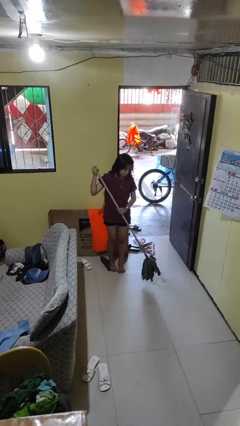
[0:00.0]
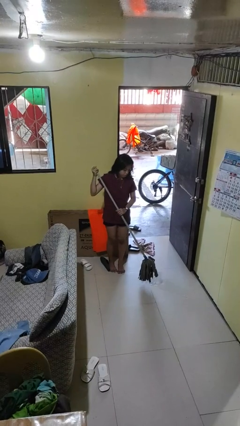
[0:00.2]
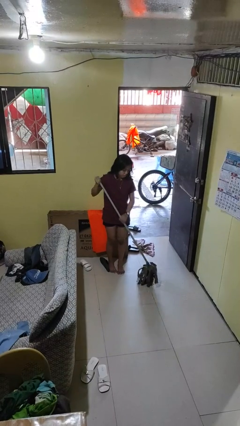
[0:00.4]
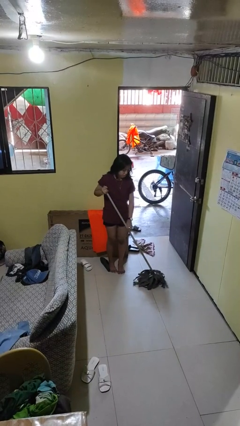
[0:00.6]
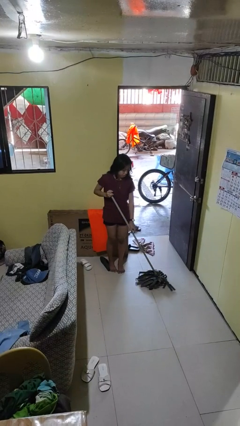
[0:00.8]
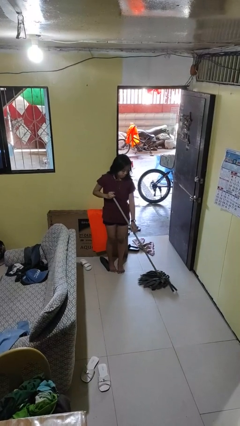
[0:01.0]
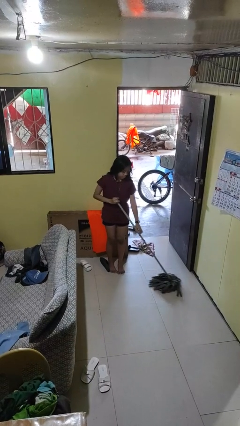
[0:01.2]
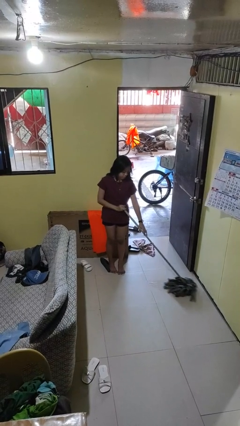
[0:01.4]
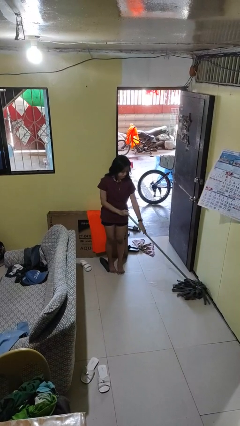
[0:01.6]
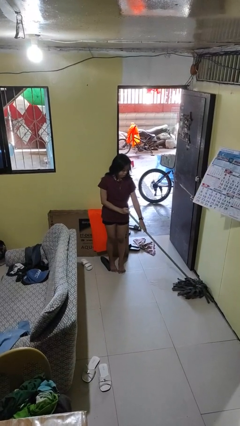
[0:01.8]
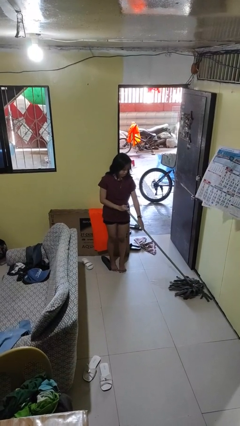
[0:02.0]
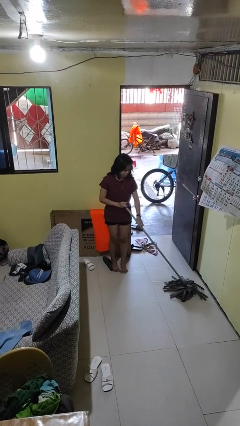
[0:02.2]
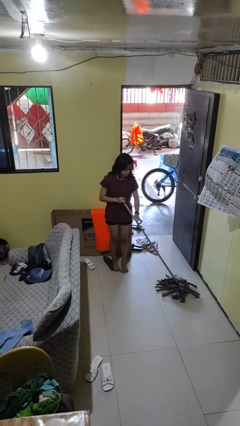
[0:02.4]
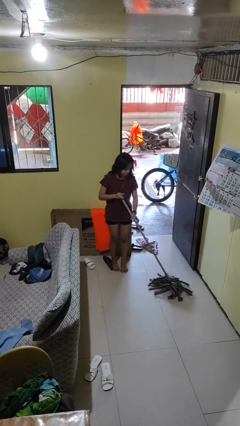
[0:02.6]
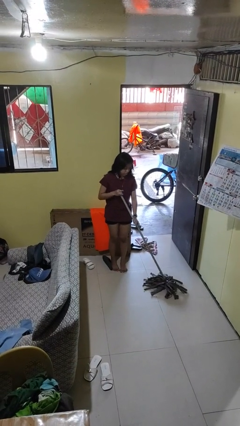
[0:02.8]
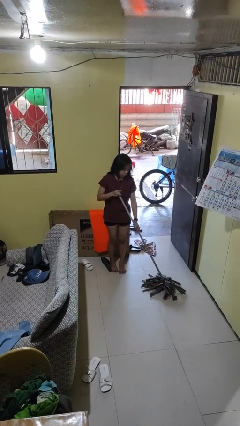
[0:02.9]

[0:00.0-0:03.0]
person mops

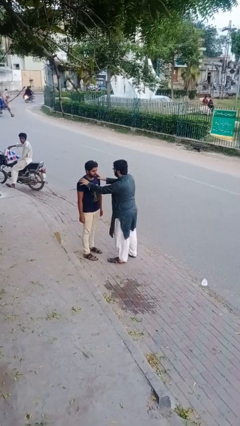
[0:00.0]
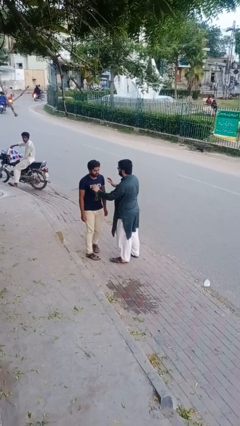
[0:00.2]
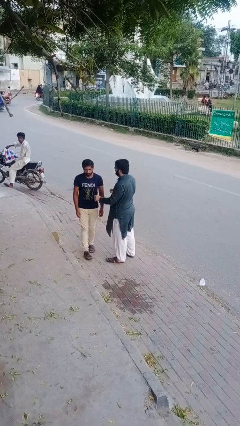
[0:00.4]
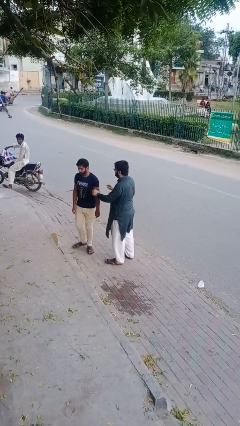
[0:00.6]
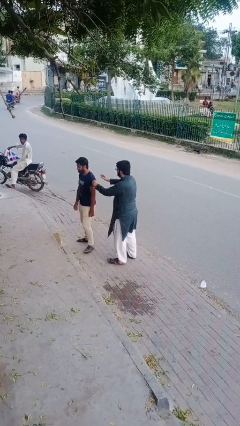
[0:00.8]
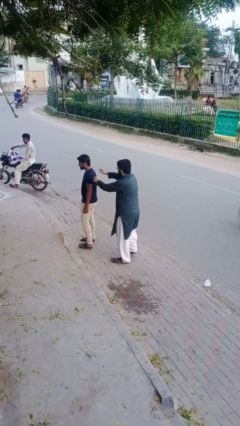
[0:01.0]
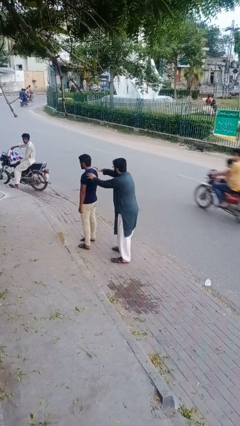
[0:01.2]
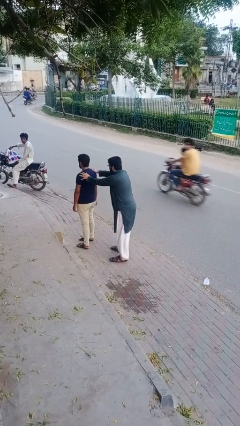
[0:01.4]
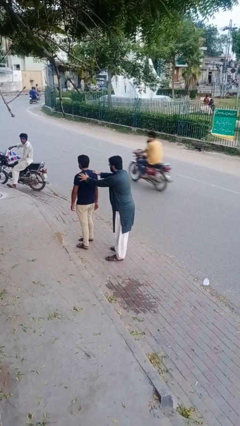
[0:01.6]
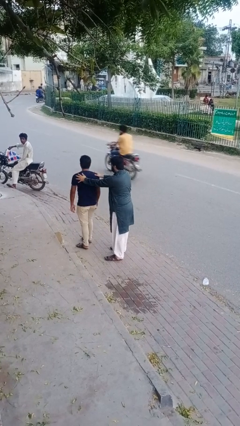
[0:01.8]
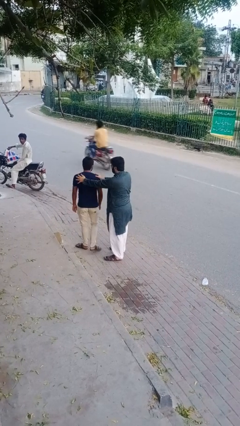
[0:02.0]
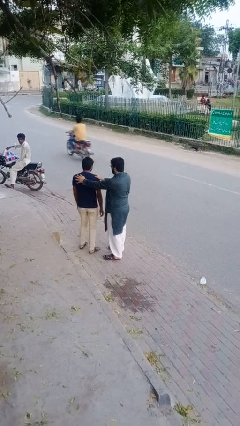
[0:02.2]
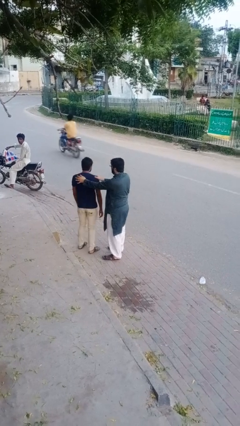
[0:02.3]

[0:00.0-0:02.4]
person grabs person by shoulder

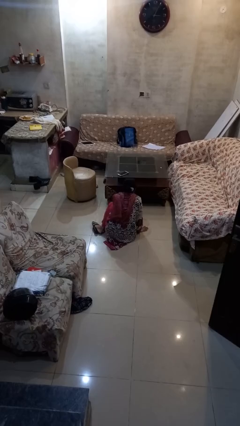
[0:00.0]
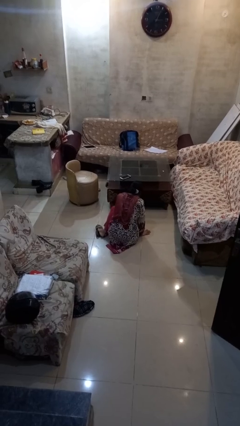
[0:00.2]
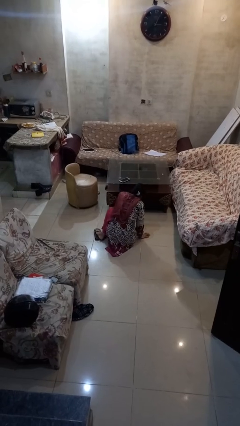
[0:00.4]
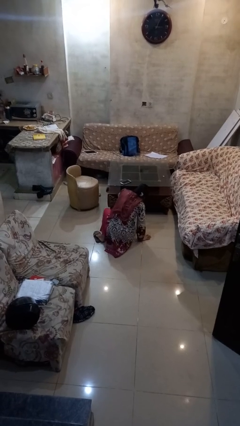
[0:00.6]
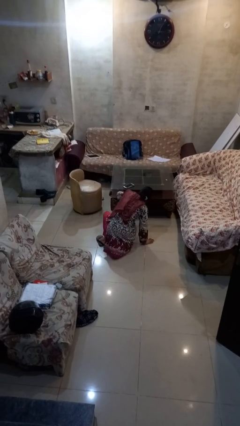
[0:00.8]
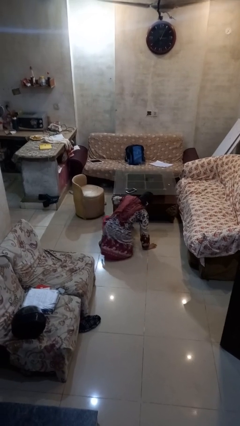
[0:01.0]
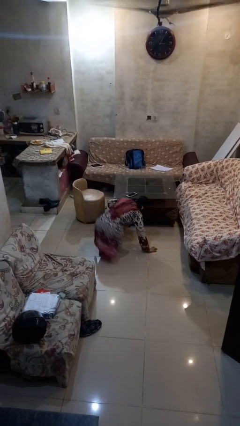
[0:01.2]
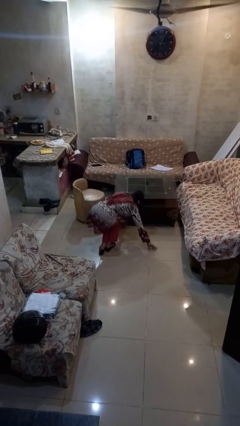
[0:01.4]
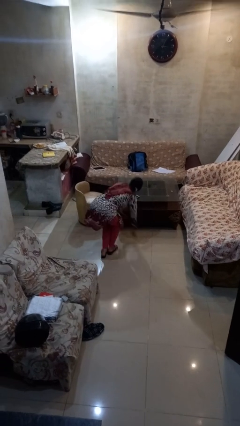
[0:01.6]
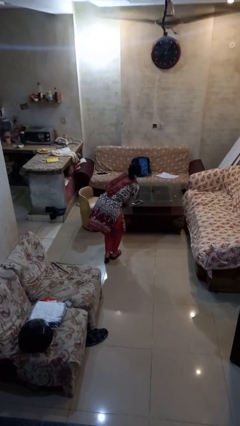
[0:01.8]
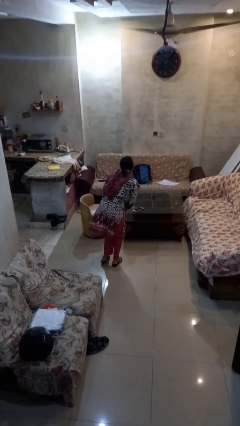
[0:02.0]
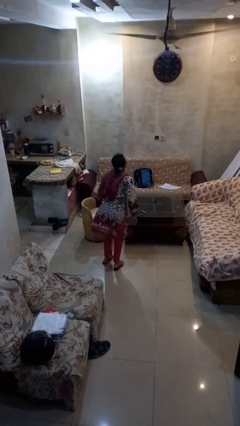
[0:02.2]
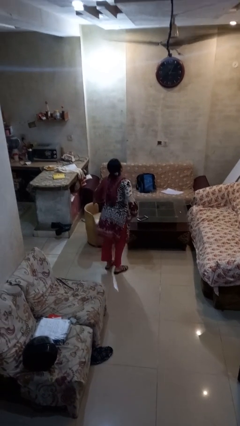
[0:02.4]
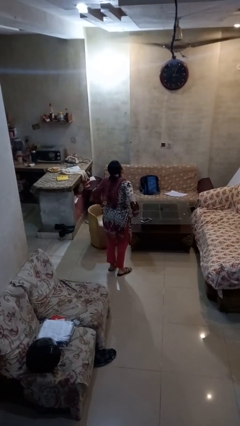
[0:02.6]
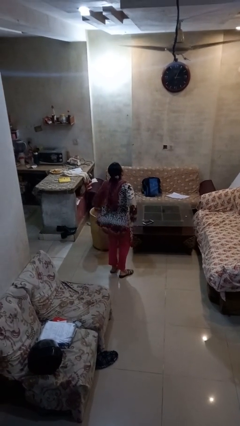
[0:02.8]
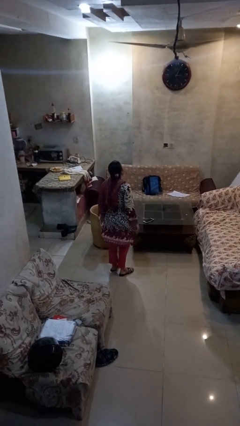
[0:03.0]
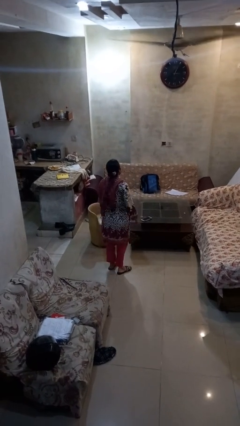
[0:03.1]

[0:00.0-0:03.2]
person stands up from floor

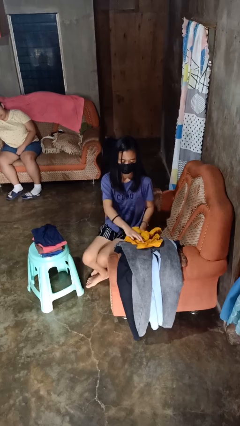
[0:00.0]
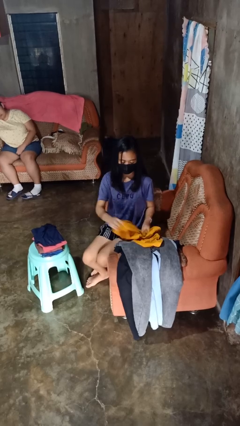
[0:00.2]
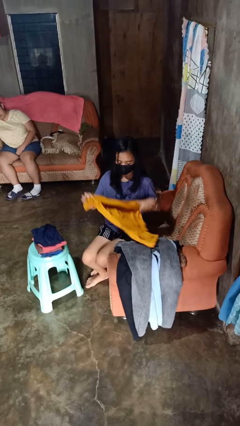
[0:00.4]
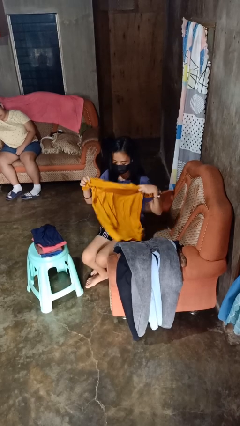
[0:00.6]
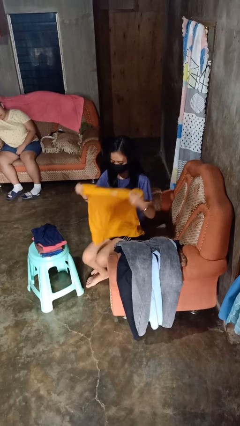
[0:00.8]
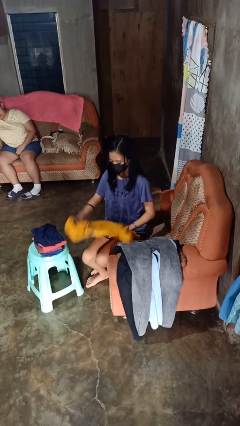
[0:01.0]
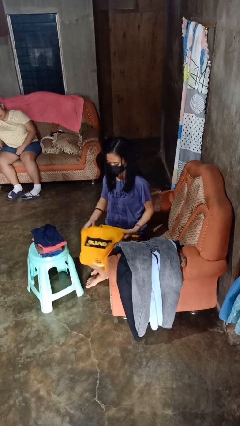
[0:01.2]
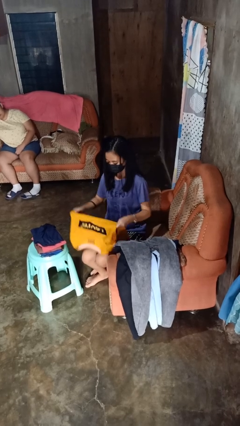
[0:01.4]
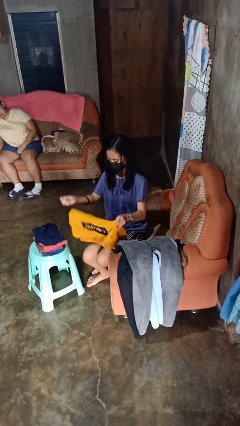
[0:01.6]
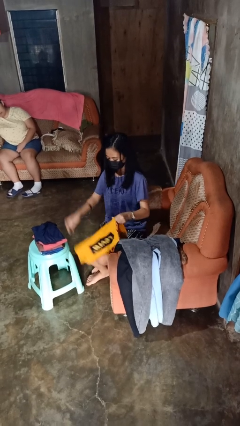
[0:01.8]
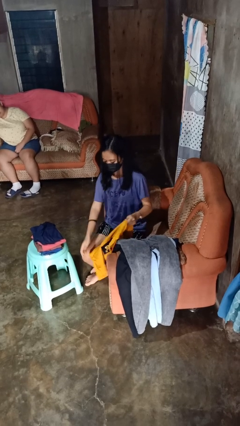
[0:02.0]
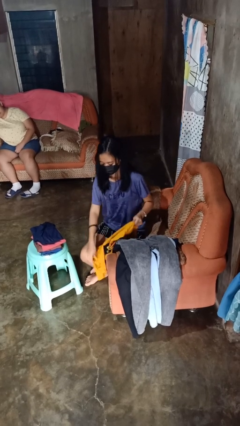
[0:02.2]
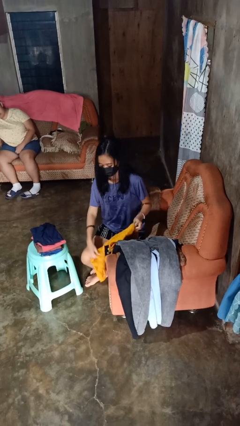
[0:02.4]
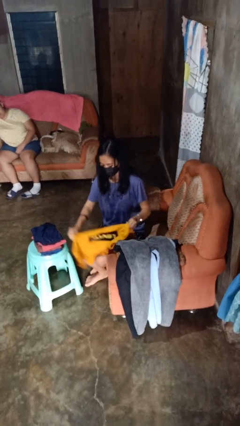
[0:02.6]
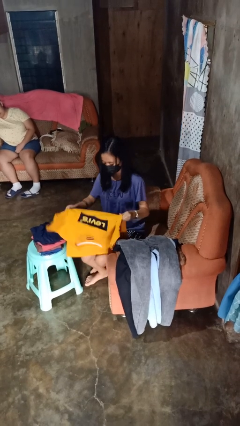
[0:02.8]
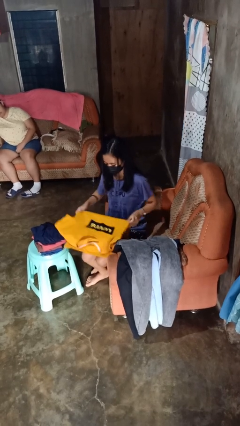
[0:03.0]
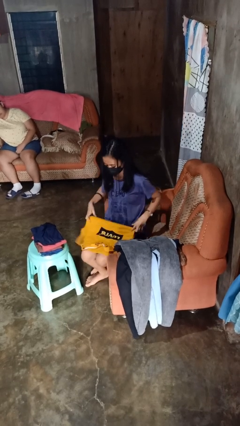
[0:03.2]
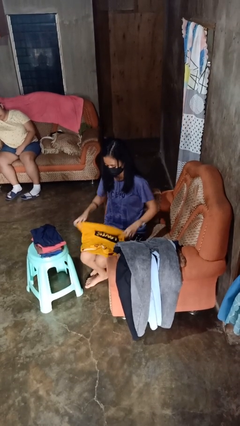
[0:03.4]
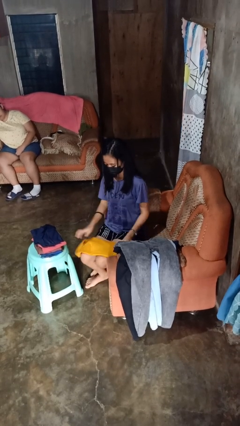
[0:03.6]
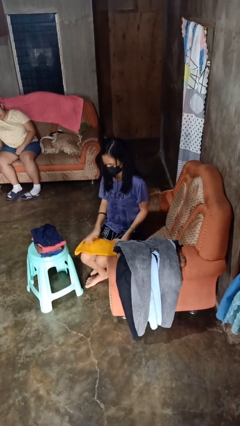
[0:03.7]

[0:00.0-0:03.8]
person folds shirt

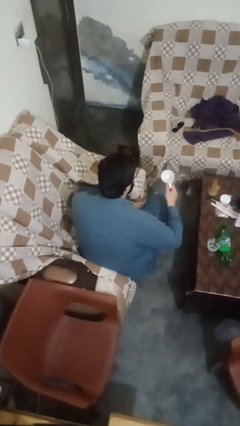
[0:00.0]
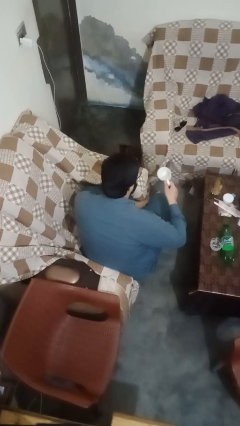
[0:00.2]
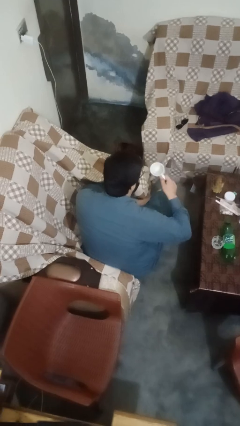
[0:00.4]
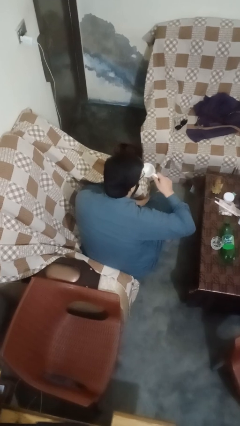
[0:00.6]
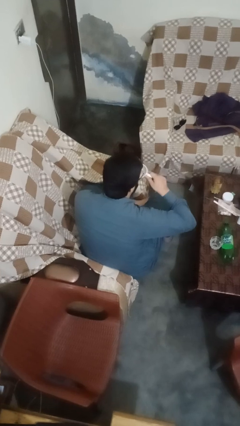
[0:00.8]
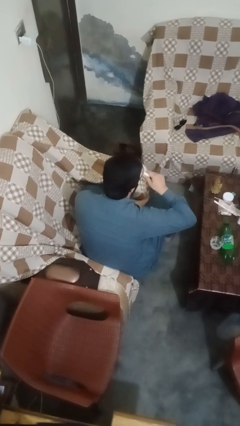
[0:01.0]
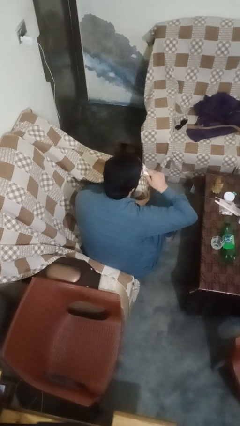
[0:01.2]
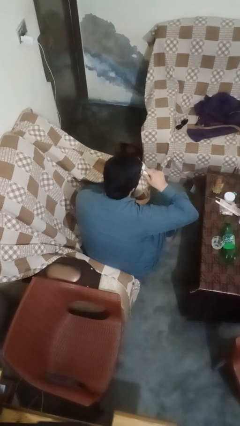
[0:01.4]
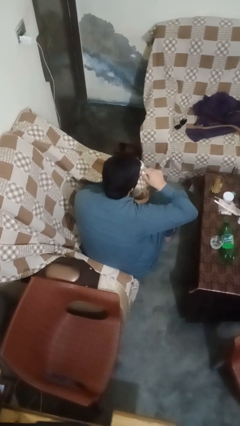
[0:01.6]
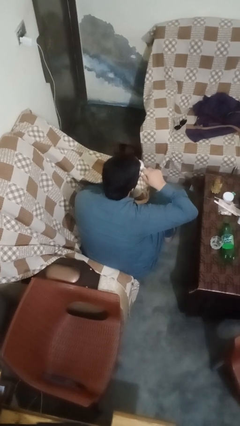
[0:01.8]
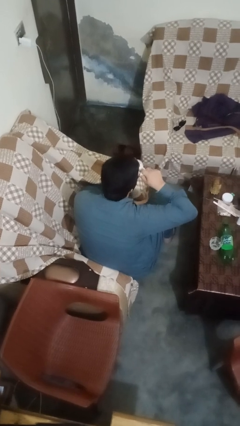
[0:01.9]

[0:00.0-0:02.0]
person drinks from mug

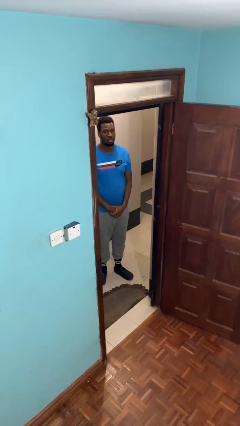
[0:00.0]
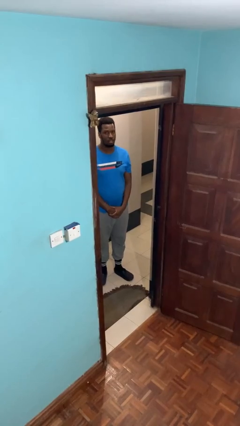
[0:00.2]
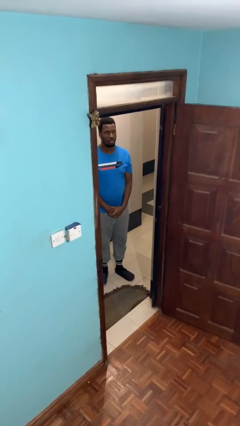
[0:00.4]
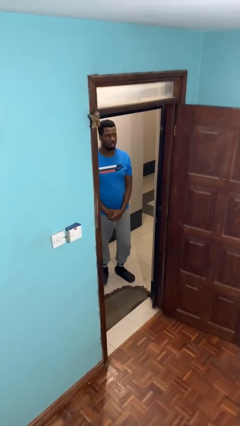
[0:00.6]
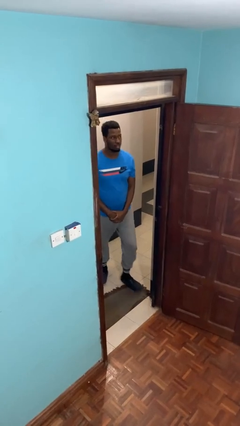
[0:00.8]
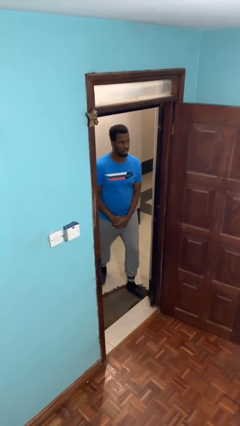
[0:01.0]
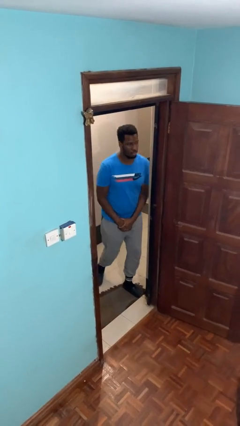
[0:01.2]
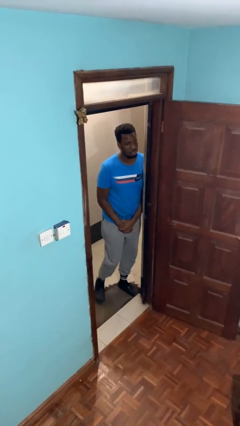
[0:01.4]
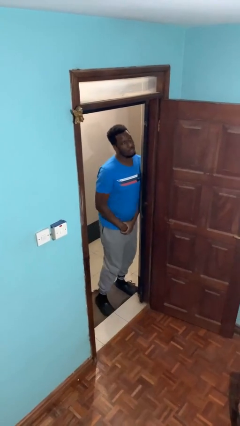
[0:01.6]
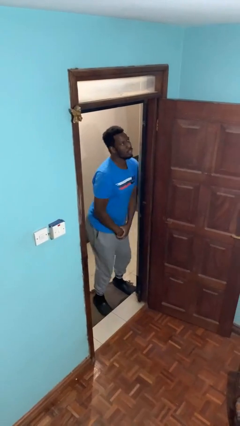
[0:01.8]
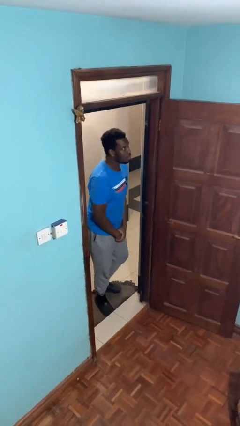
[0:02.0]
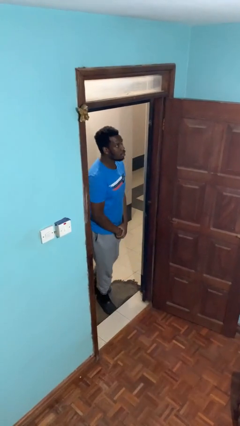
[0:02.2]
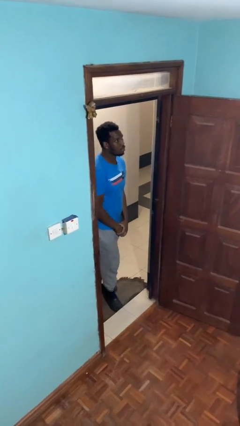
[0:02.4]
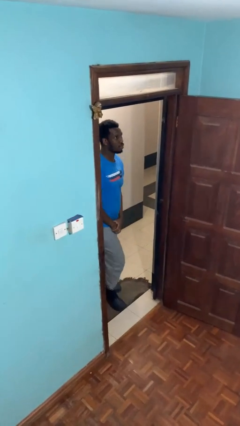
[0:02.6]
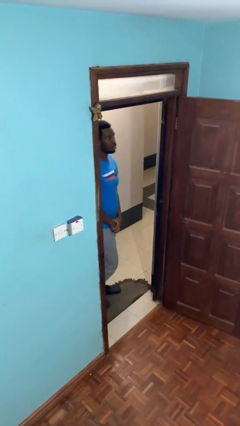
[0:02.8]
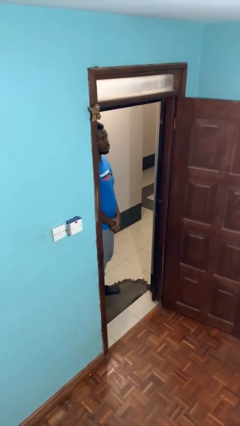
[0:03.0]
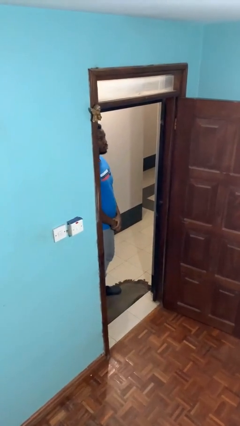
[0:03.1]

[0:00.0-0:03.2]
person bumps into wall
